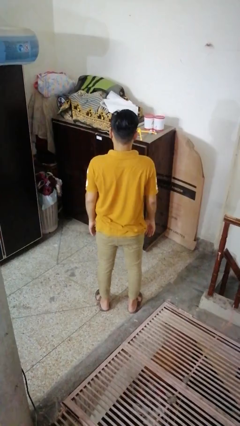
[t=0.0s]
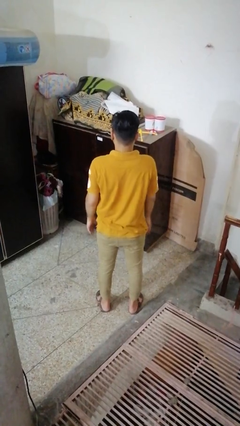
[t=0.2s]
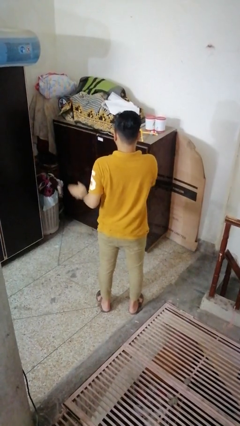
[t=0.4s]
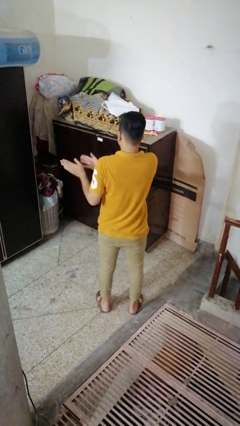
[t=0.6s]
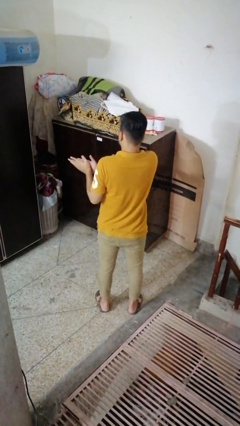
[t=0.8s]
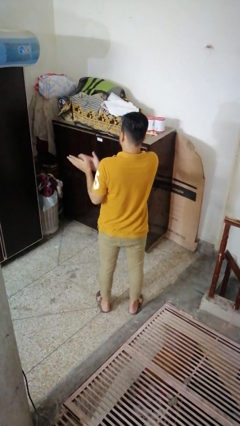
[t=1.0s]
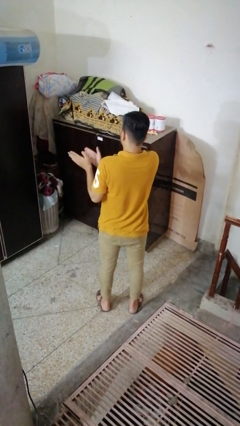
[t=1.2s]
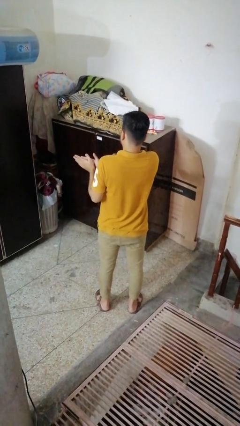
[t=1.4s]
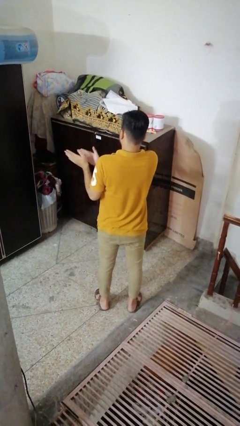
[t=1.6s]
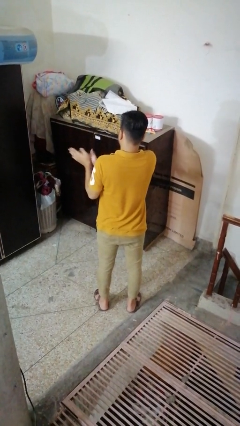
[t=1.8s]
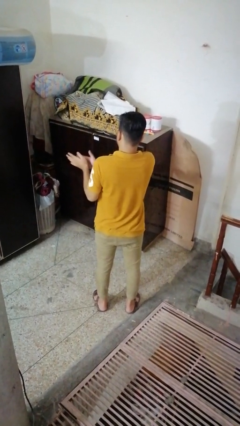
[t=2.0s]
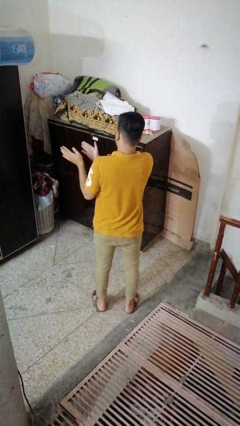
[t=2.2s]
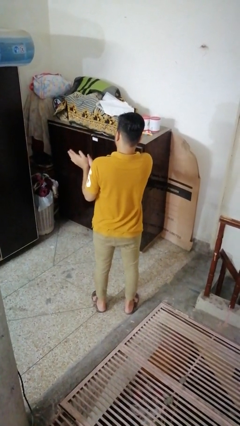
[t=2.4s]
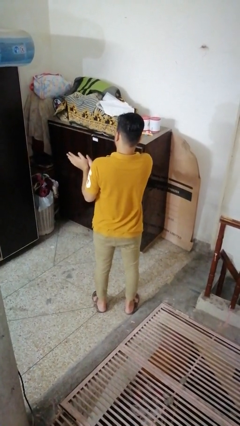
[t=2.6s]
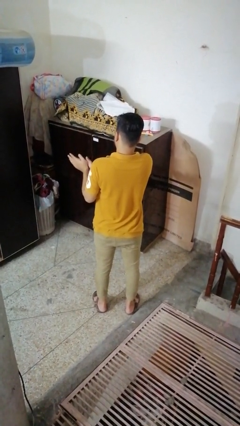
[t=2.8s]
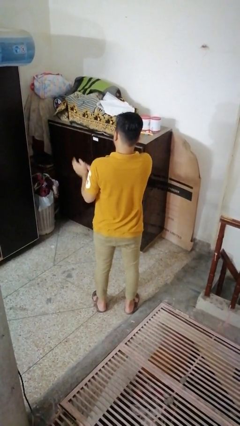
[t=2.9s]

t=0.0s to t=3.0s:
person claps hands

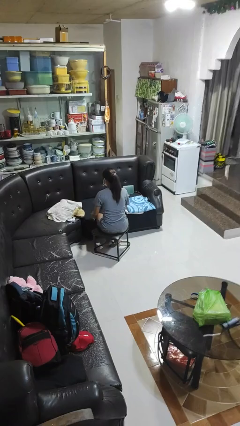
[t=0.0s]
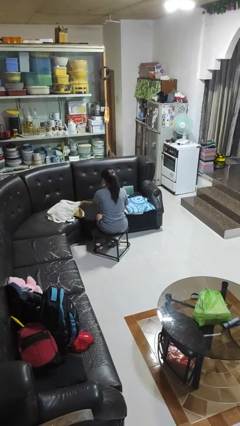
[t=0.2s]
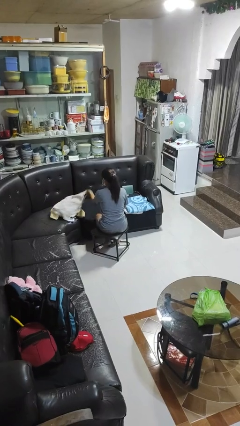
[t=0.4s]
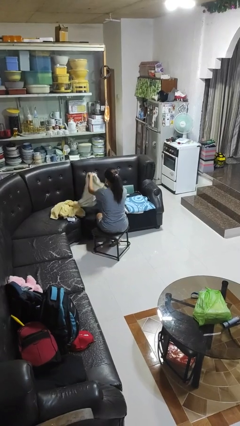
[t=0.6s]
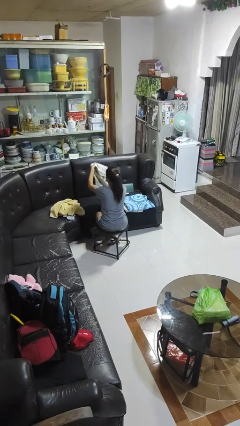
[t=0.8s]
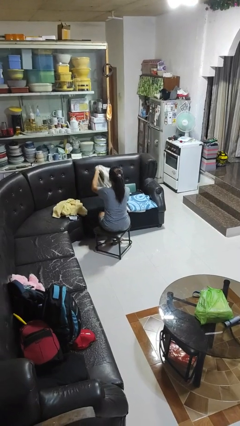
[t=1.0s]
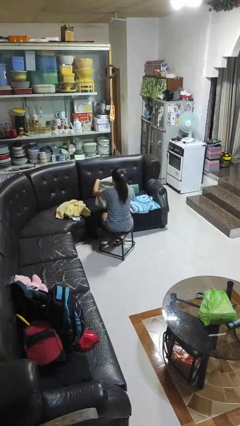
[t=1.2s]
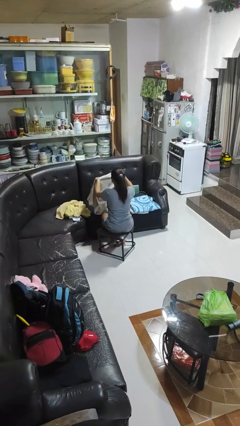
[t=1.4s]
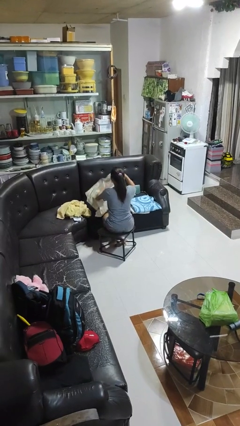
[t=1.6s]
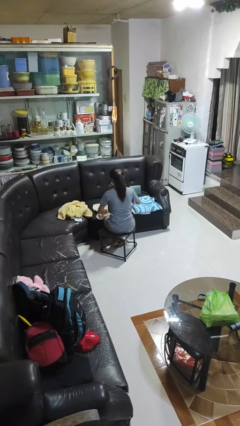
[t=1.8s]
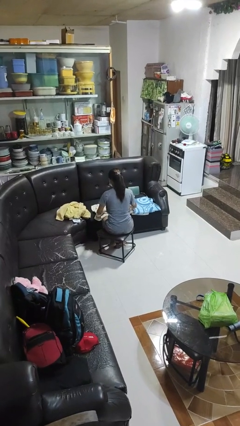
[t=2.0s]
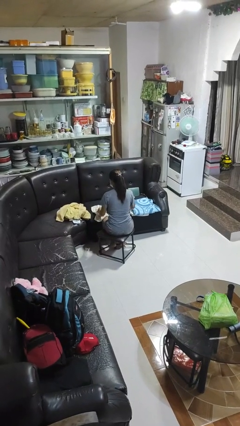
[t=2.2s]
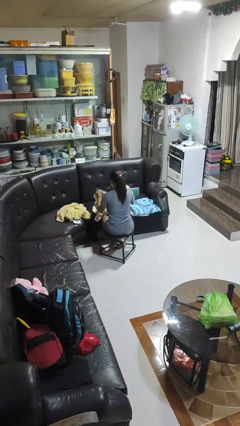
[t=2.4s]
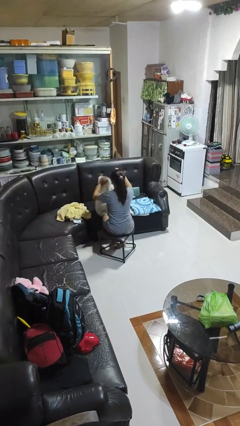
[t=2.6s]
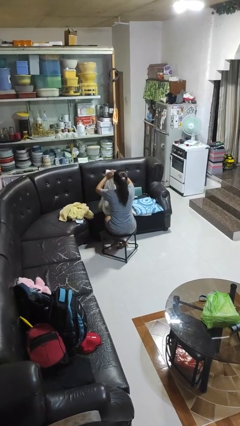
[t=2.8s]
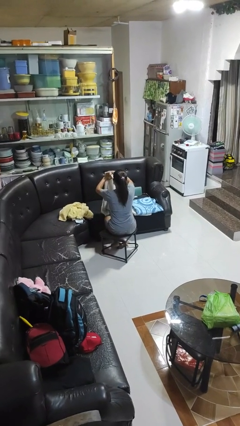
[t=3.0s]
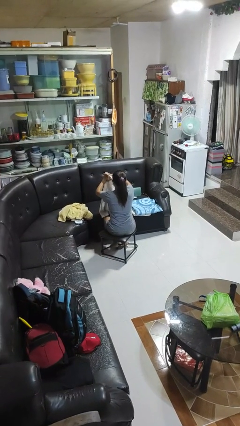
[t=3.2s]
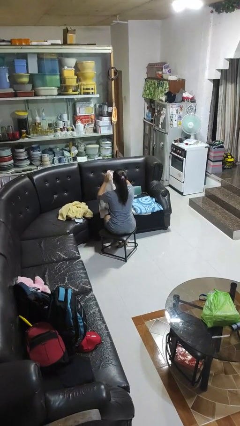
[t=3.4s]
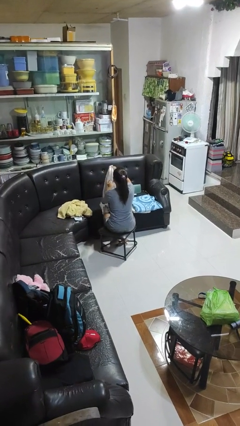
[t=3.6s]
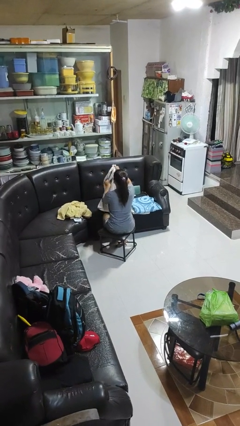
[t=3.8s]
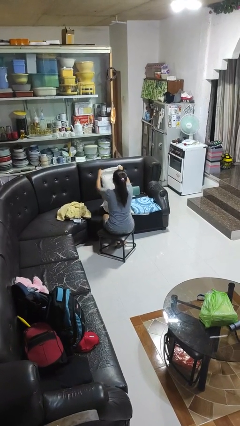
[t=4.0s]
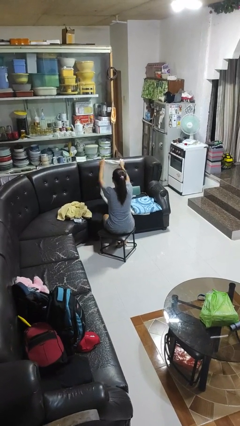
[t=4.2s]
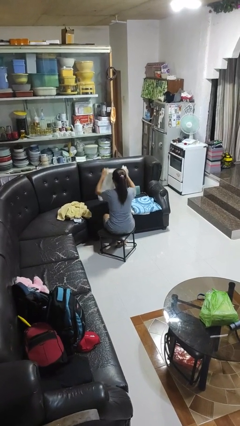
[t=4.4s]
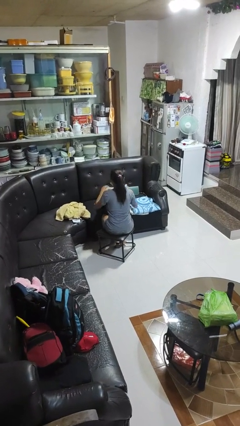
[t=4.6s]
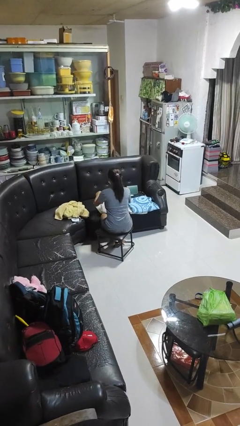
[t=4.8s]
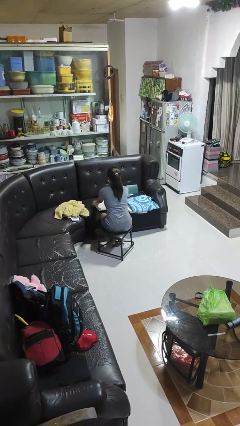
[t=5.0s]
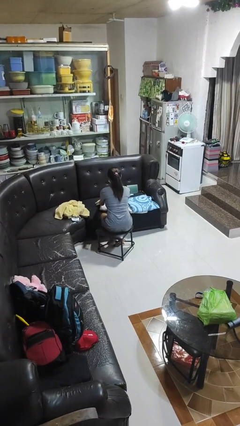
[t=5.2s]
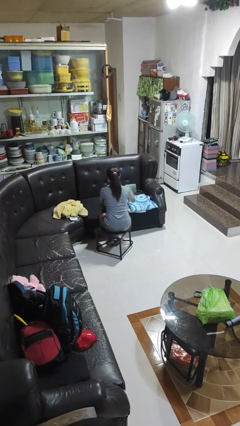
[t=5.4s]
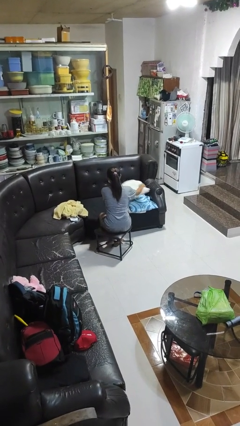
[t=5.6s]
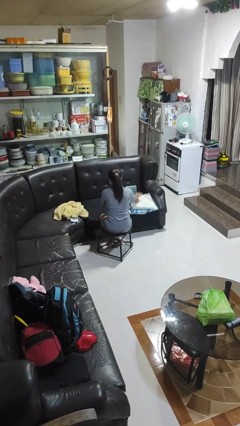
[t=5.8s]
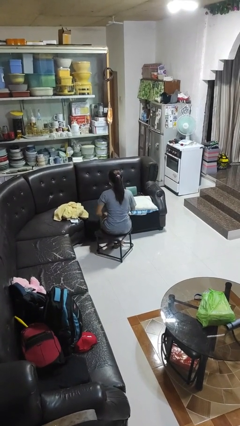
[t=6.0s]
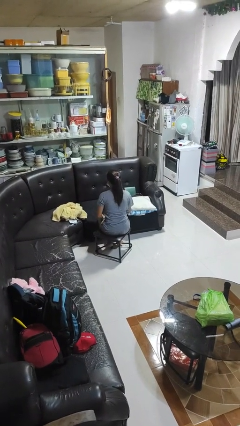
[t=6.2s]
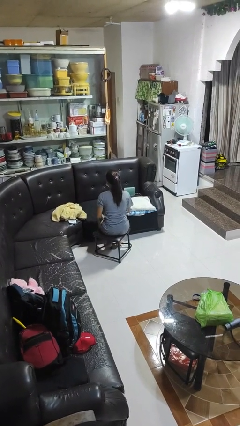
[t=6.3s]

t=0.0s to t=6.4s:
person folds towel

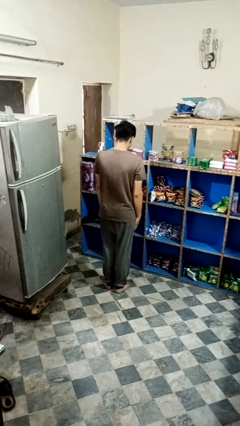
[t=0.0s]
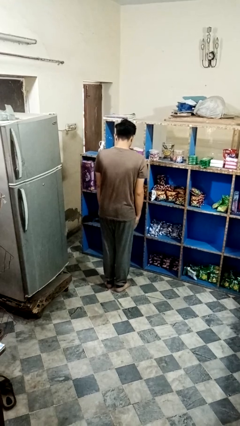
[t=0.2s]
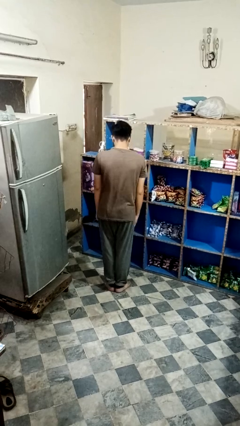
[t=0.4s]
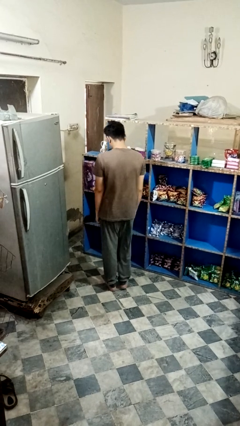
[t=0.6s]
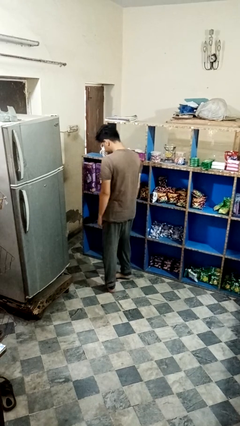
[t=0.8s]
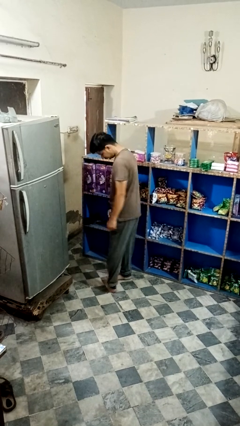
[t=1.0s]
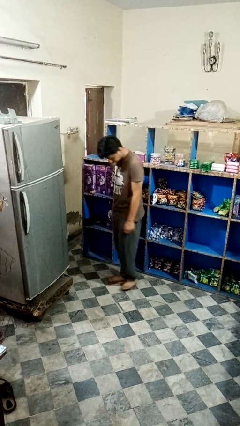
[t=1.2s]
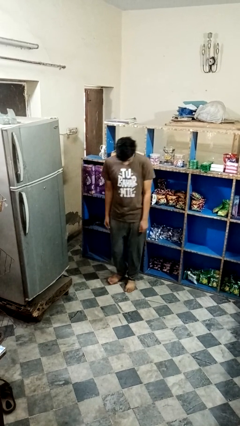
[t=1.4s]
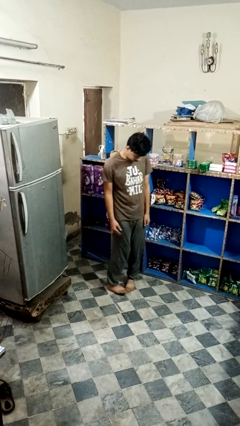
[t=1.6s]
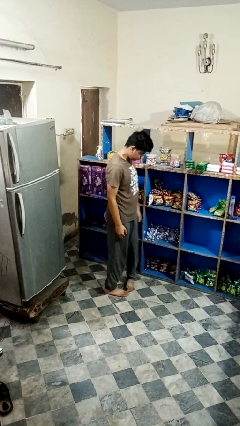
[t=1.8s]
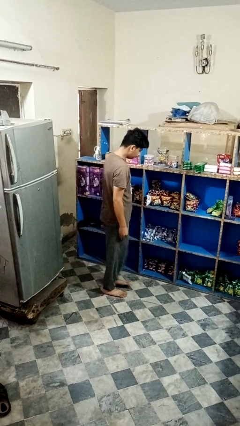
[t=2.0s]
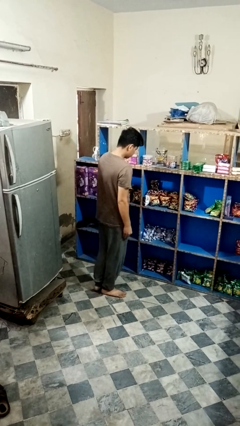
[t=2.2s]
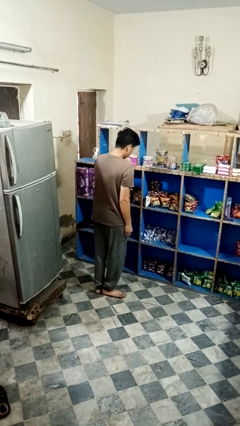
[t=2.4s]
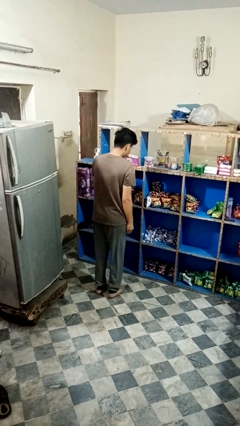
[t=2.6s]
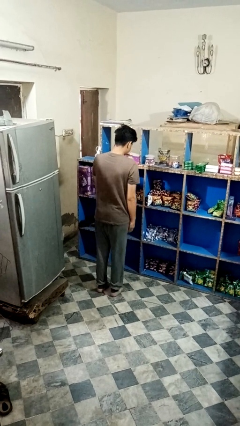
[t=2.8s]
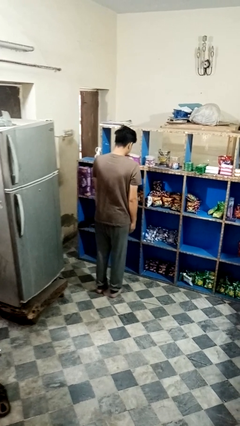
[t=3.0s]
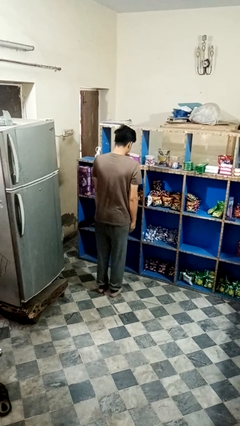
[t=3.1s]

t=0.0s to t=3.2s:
person twirls

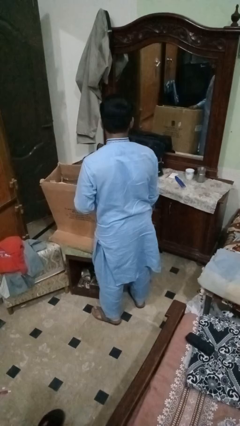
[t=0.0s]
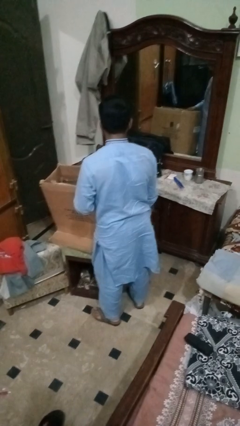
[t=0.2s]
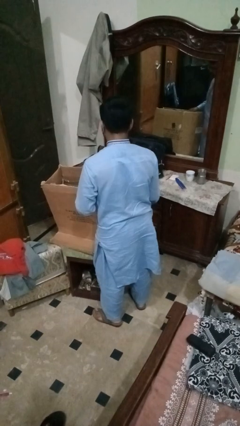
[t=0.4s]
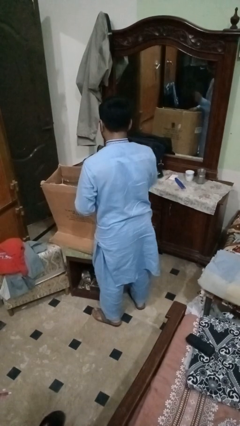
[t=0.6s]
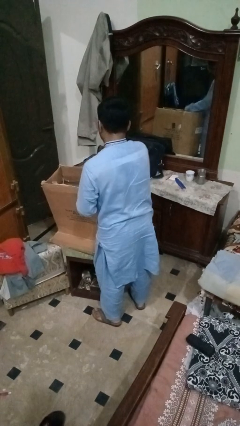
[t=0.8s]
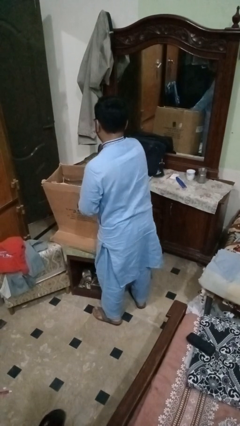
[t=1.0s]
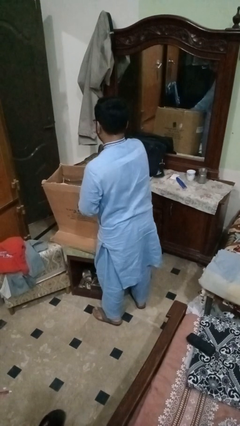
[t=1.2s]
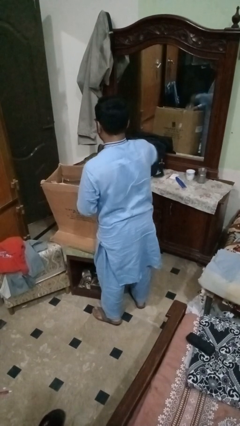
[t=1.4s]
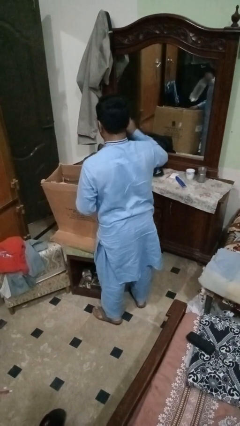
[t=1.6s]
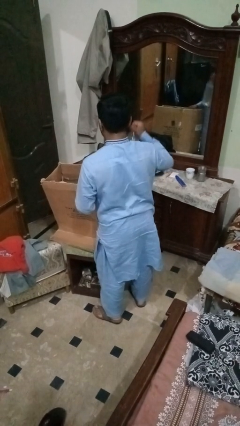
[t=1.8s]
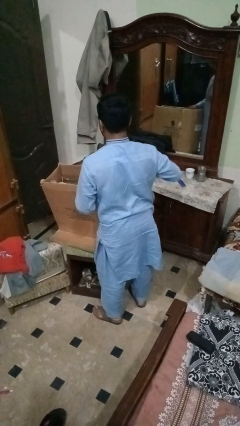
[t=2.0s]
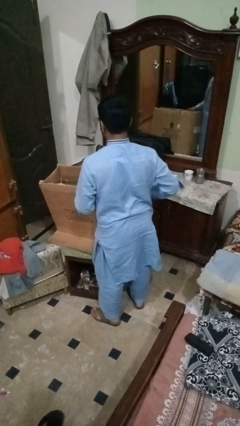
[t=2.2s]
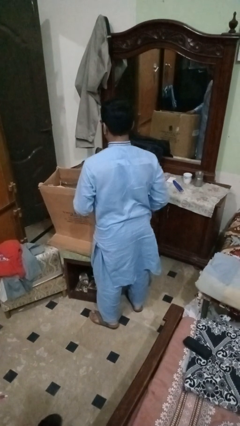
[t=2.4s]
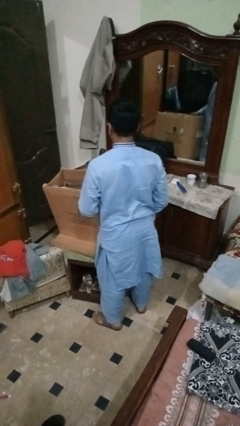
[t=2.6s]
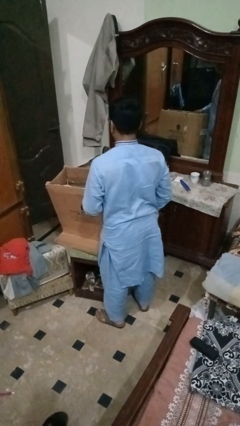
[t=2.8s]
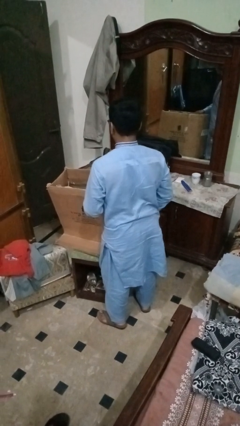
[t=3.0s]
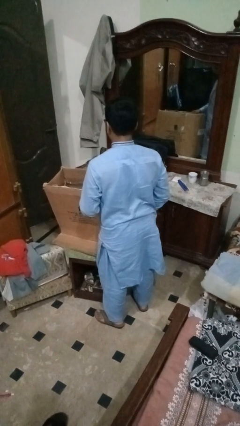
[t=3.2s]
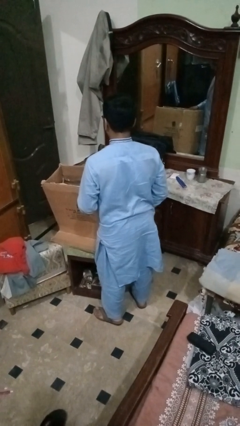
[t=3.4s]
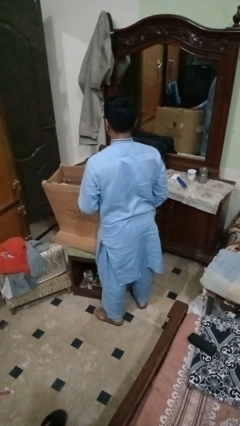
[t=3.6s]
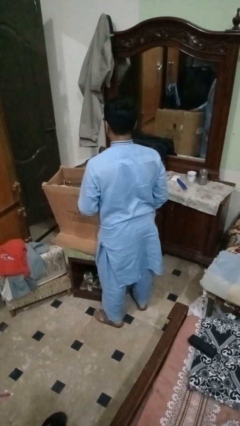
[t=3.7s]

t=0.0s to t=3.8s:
person takes object from box

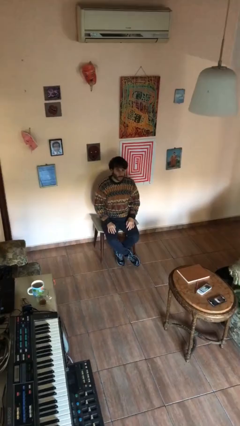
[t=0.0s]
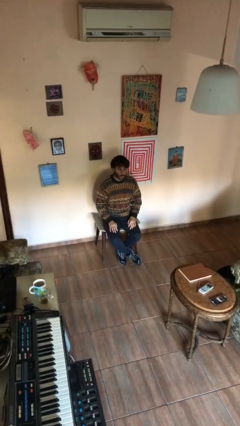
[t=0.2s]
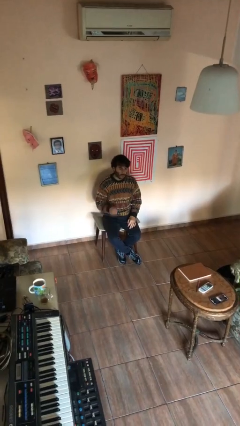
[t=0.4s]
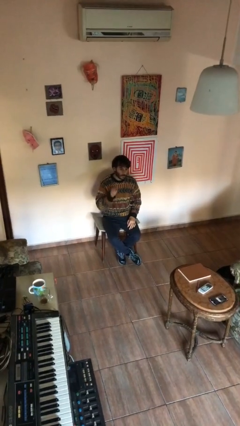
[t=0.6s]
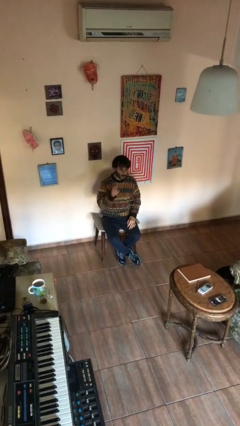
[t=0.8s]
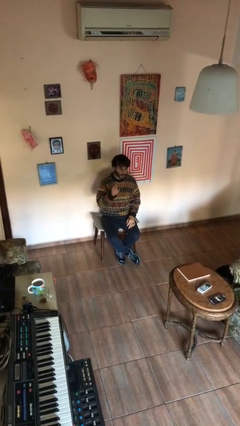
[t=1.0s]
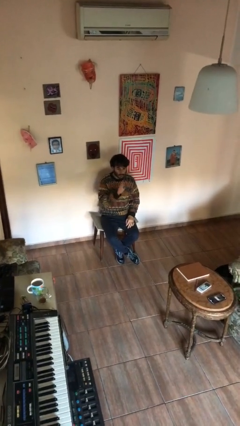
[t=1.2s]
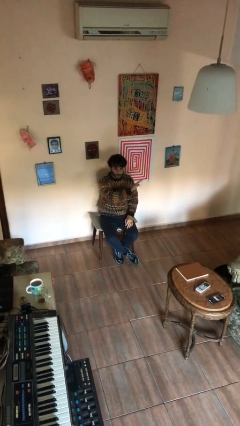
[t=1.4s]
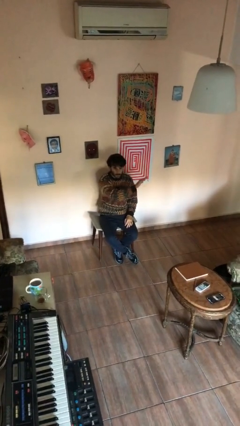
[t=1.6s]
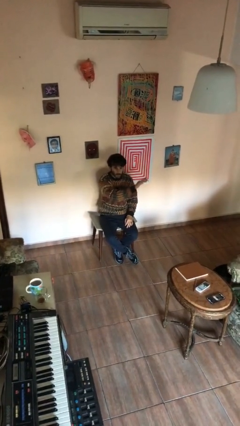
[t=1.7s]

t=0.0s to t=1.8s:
person gestures swipe left
